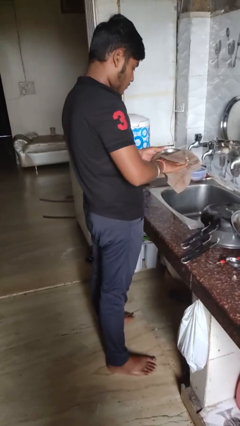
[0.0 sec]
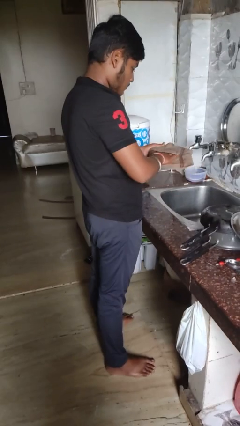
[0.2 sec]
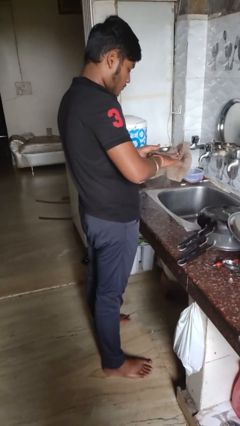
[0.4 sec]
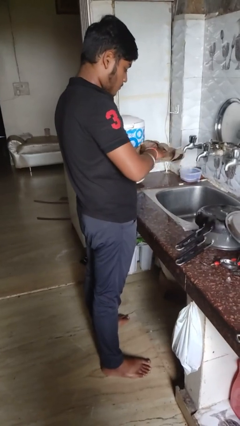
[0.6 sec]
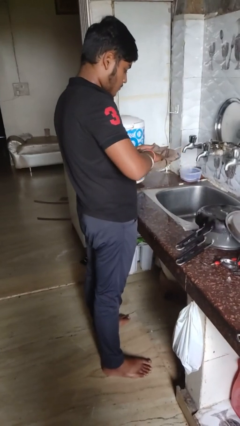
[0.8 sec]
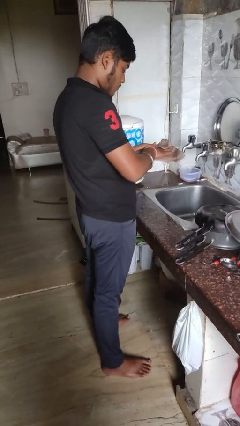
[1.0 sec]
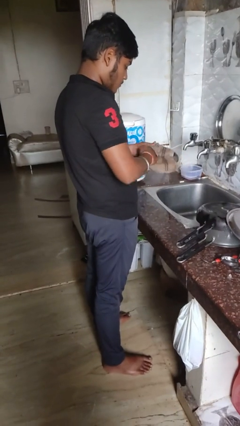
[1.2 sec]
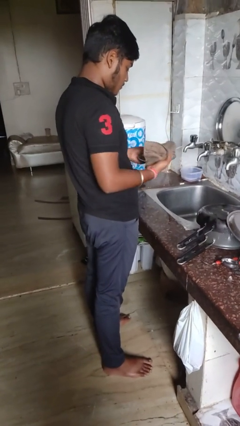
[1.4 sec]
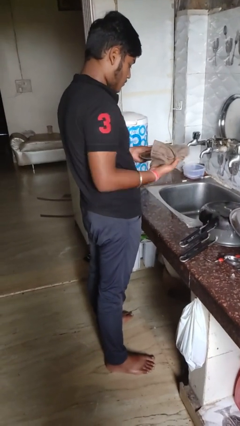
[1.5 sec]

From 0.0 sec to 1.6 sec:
person dries dish

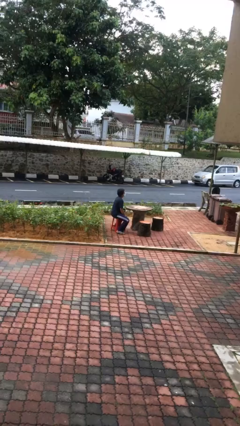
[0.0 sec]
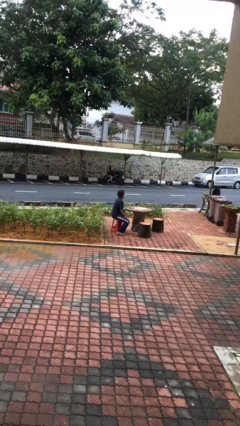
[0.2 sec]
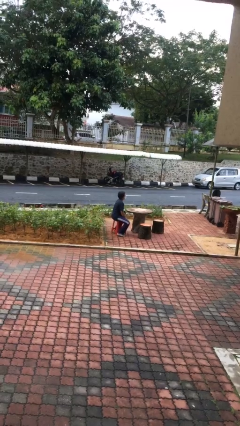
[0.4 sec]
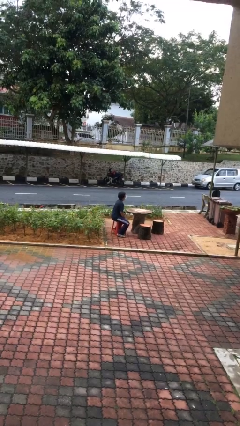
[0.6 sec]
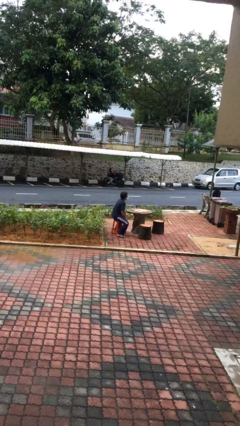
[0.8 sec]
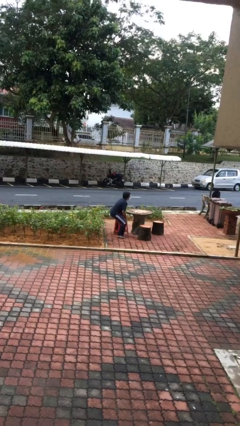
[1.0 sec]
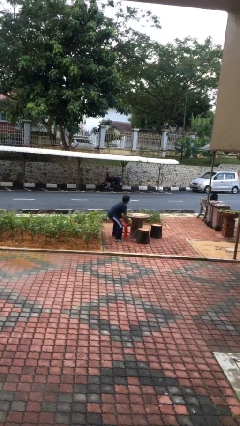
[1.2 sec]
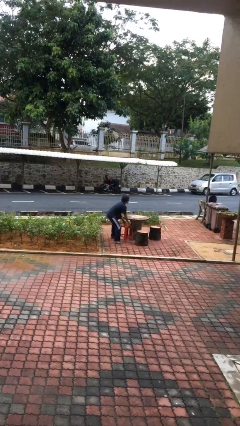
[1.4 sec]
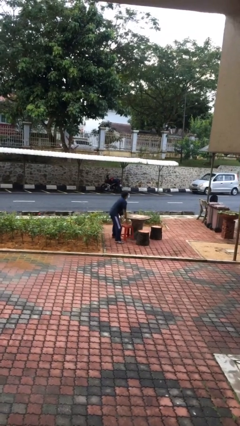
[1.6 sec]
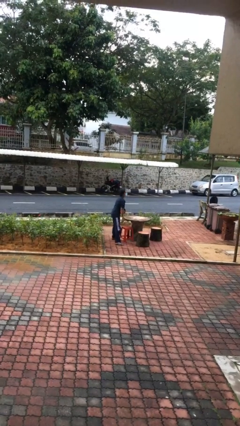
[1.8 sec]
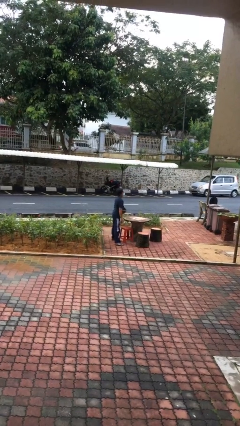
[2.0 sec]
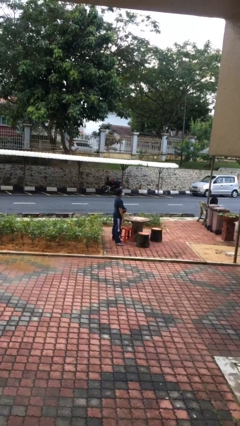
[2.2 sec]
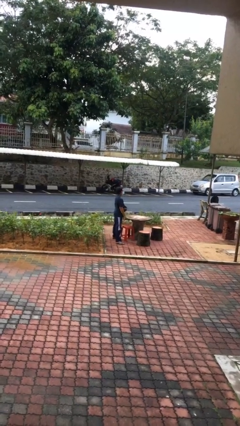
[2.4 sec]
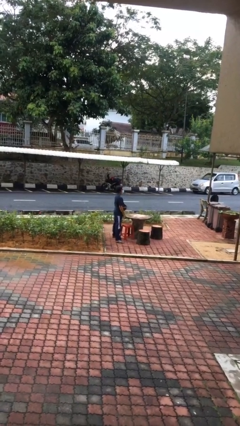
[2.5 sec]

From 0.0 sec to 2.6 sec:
person stands up

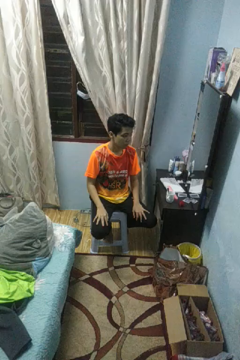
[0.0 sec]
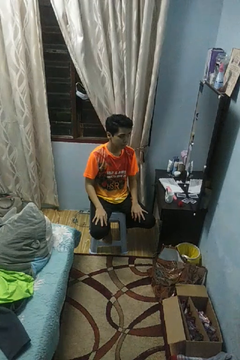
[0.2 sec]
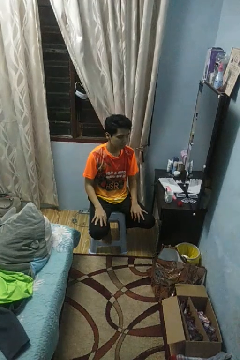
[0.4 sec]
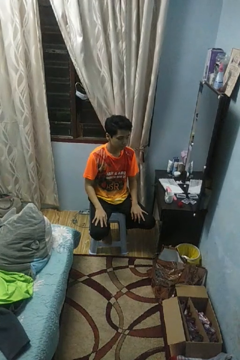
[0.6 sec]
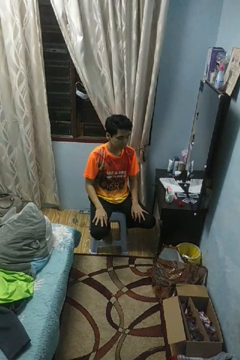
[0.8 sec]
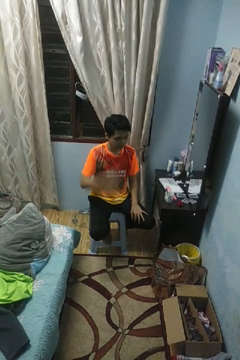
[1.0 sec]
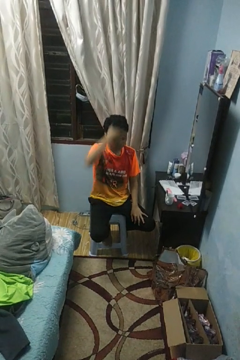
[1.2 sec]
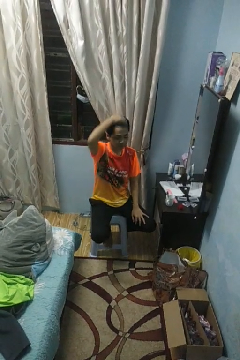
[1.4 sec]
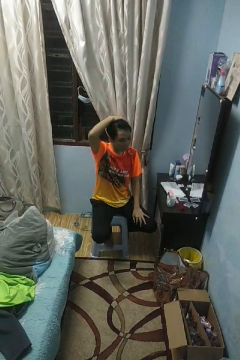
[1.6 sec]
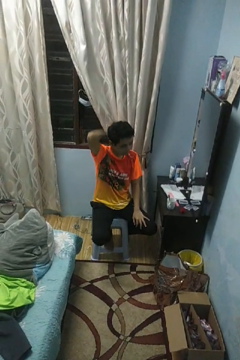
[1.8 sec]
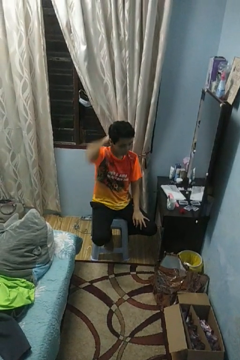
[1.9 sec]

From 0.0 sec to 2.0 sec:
person strokes hair

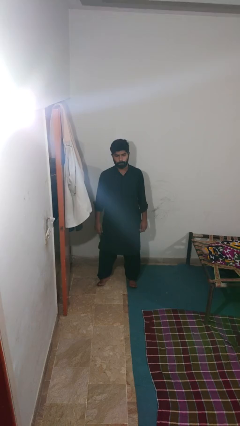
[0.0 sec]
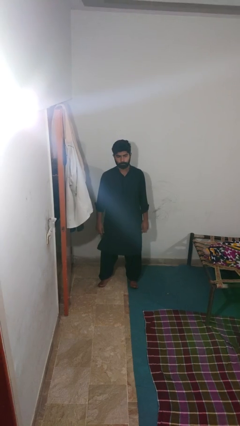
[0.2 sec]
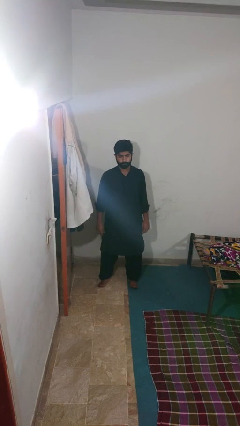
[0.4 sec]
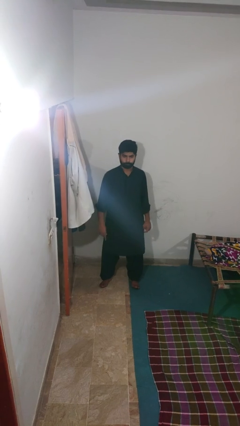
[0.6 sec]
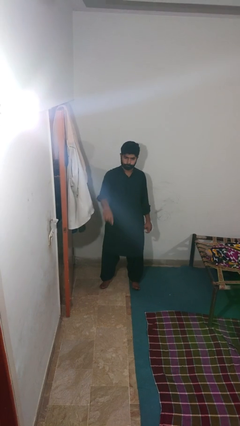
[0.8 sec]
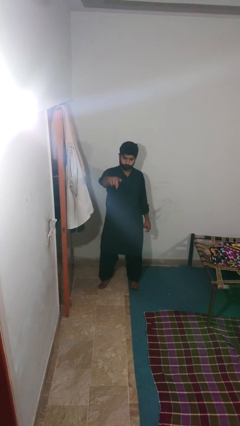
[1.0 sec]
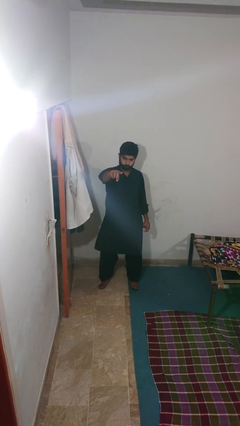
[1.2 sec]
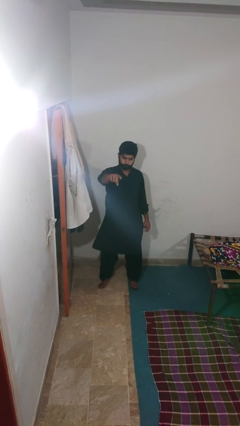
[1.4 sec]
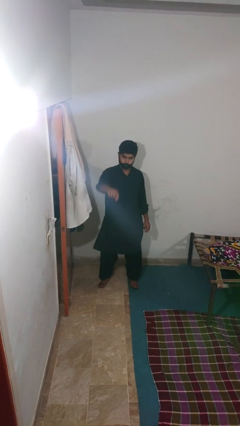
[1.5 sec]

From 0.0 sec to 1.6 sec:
person points at person

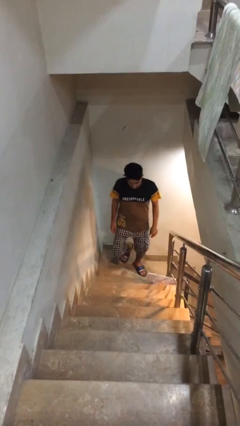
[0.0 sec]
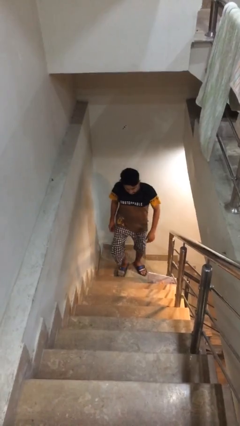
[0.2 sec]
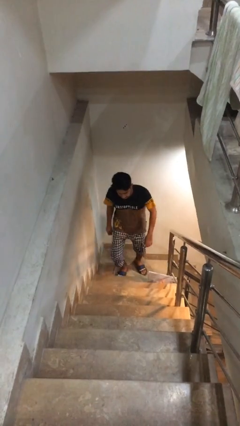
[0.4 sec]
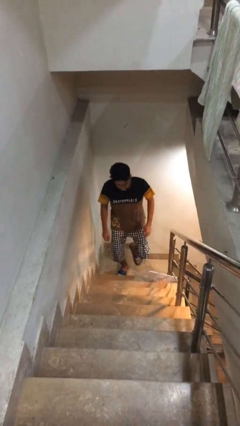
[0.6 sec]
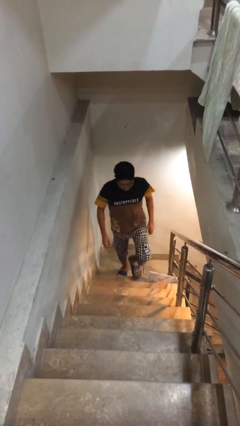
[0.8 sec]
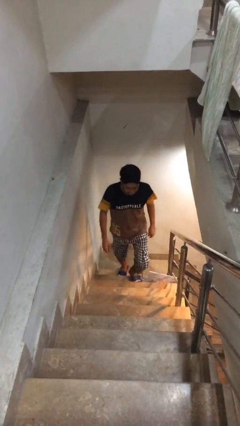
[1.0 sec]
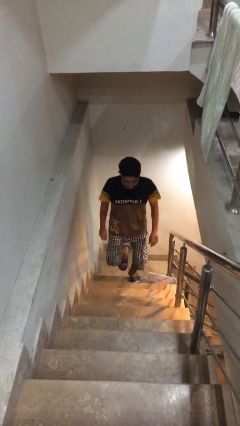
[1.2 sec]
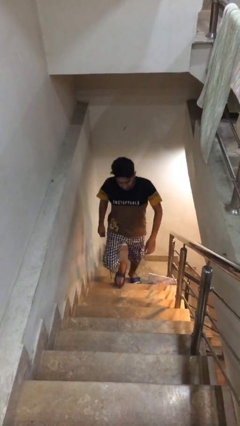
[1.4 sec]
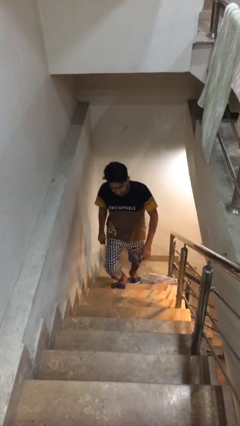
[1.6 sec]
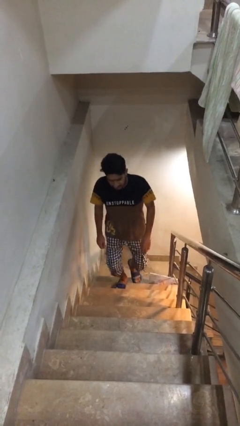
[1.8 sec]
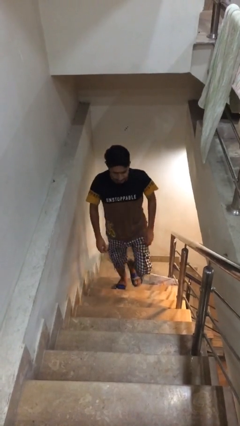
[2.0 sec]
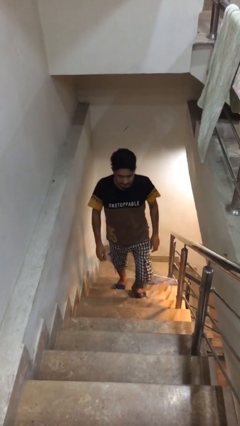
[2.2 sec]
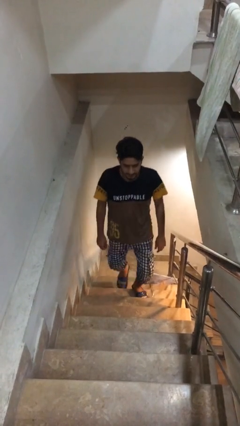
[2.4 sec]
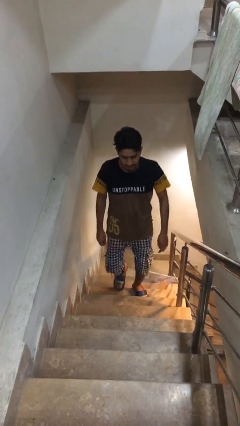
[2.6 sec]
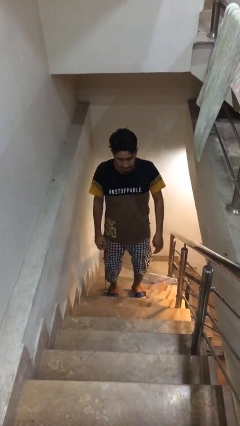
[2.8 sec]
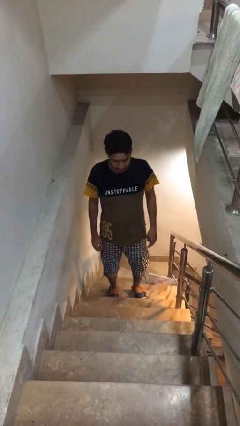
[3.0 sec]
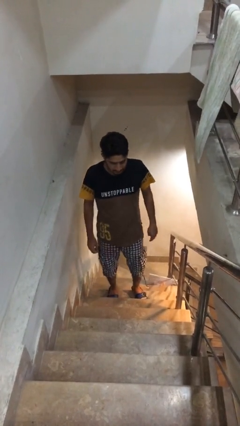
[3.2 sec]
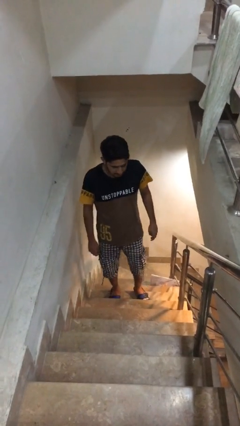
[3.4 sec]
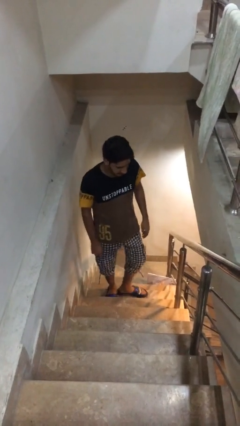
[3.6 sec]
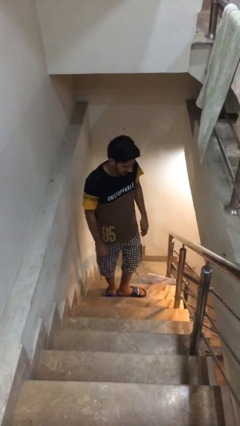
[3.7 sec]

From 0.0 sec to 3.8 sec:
person climbs up stairs

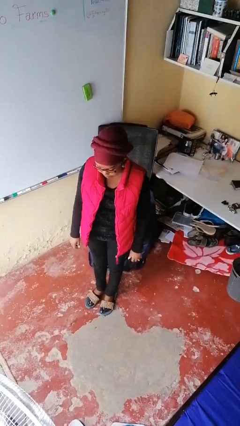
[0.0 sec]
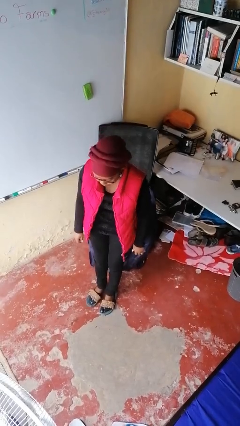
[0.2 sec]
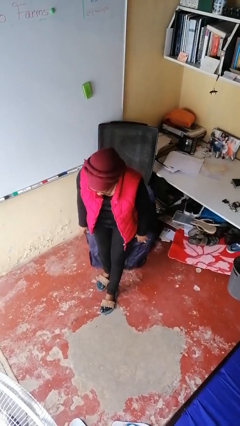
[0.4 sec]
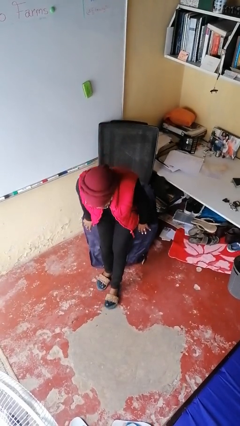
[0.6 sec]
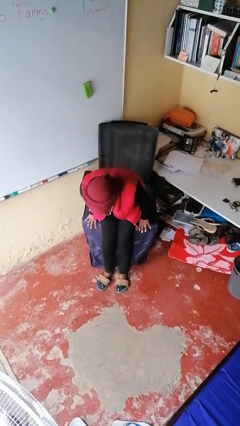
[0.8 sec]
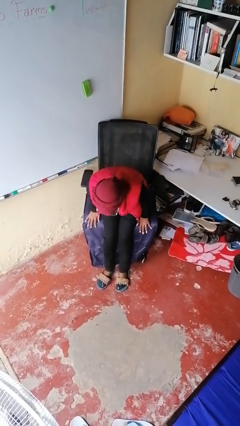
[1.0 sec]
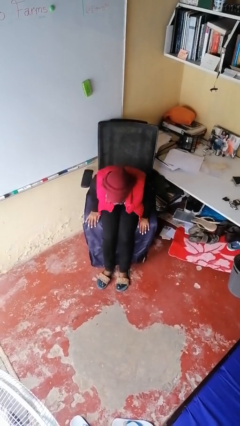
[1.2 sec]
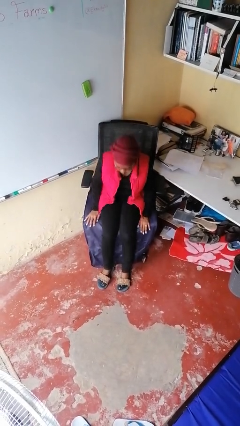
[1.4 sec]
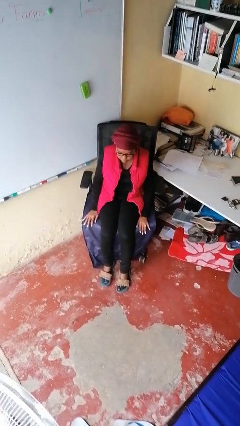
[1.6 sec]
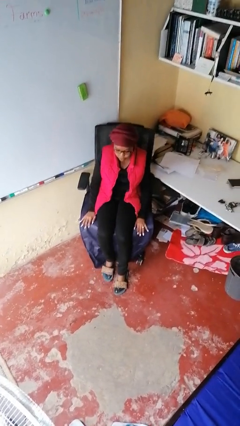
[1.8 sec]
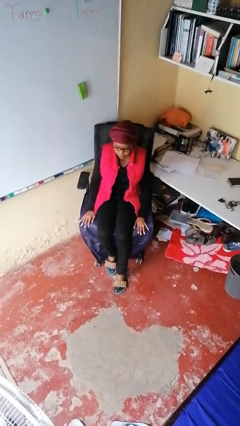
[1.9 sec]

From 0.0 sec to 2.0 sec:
person sits down

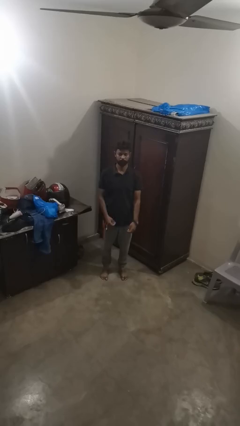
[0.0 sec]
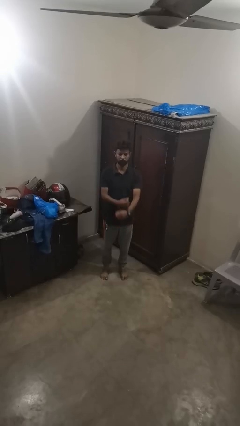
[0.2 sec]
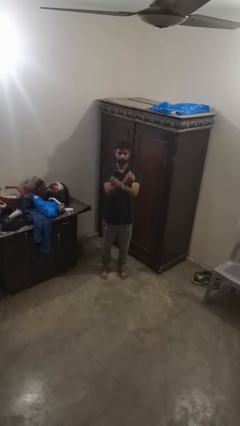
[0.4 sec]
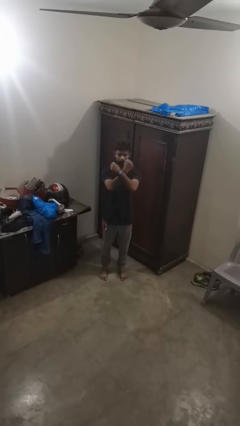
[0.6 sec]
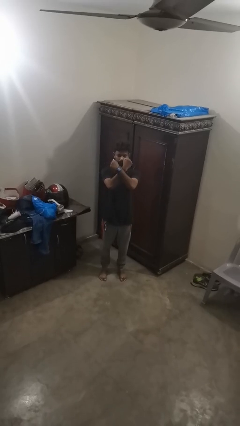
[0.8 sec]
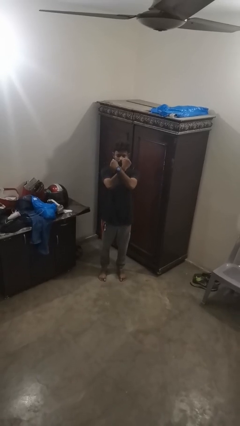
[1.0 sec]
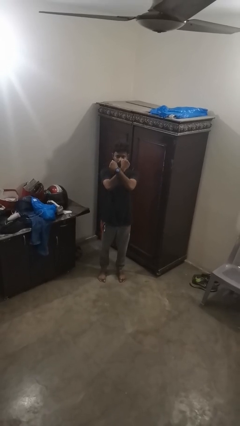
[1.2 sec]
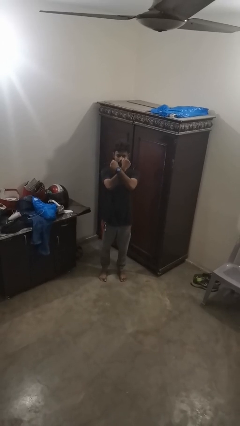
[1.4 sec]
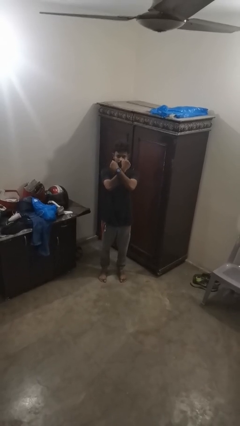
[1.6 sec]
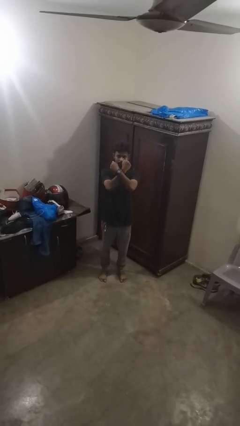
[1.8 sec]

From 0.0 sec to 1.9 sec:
person gestures arms x

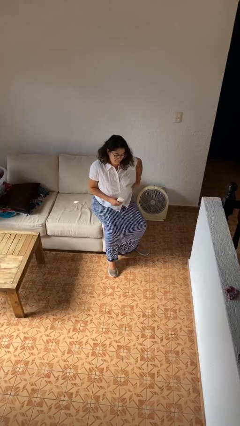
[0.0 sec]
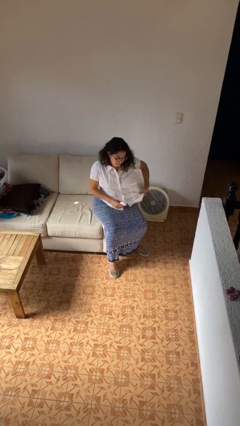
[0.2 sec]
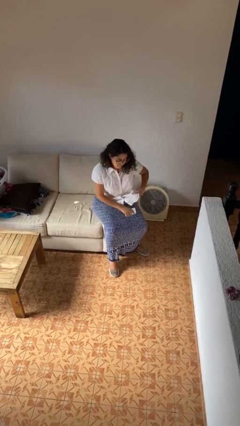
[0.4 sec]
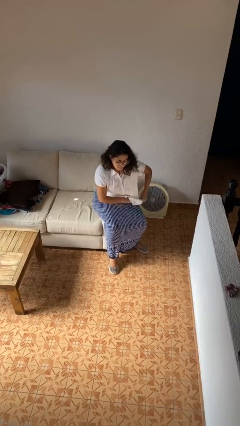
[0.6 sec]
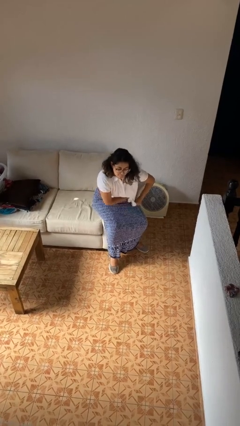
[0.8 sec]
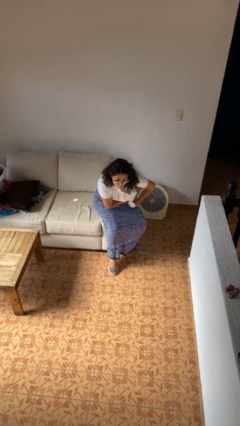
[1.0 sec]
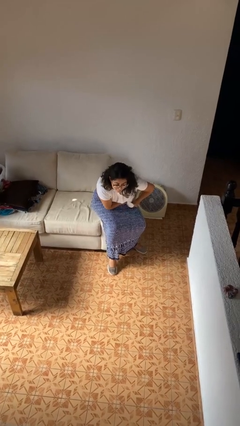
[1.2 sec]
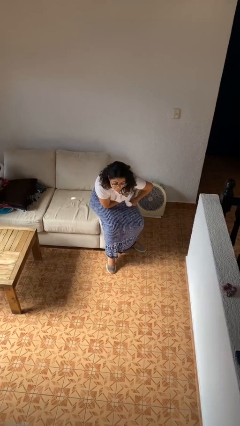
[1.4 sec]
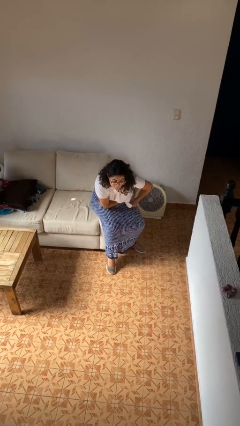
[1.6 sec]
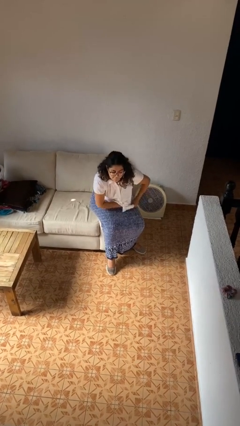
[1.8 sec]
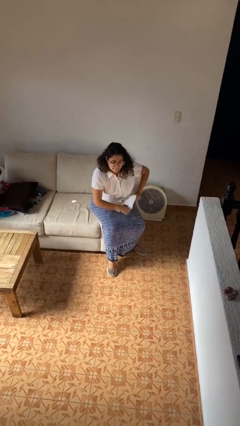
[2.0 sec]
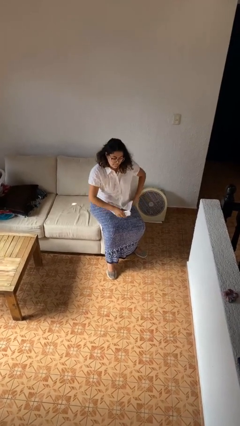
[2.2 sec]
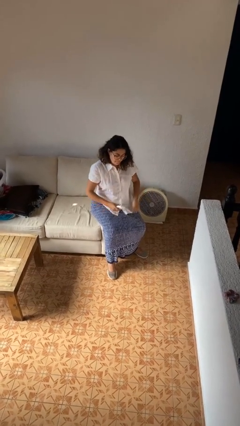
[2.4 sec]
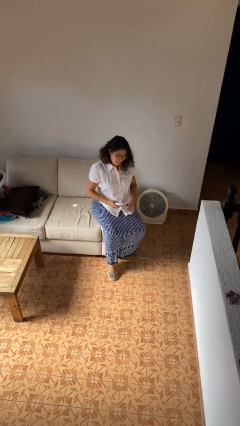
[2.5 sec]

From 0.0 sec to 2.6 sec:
person applies deodorant
